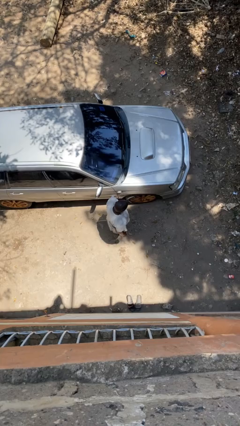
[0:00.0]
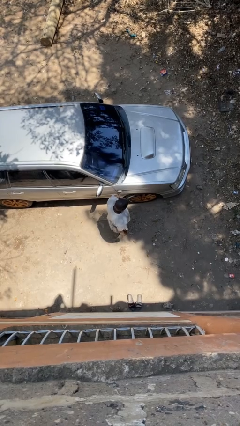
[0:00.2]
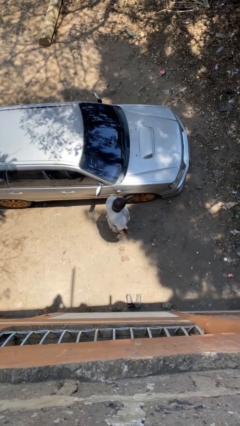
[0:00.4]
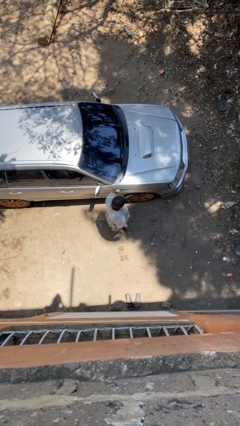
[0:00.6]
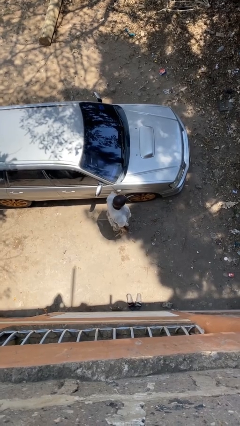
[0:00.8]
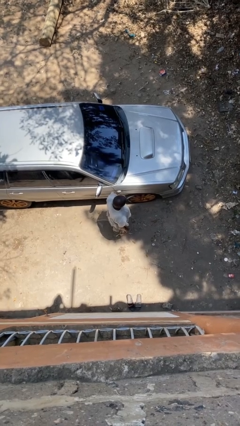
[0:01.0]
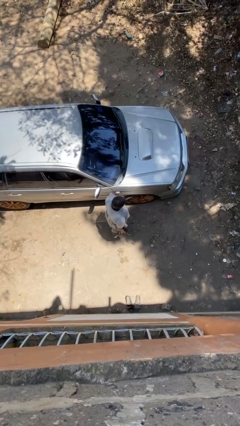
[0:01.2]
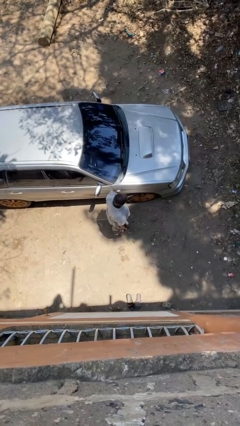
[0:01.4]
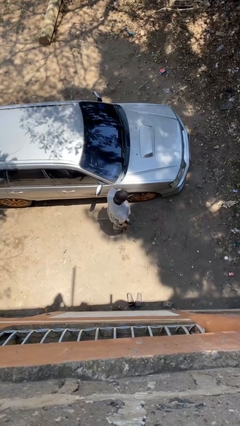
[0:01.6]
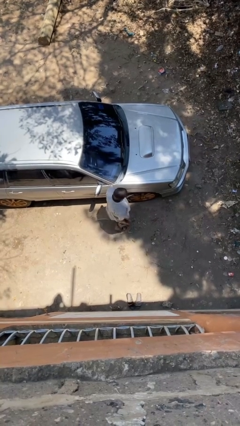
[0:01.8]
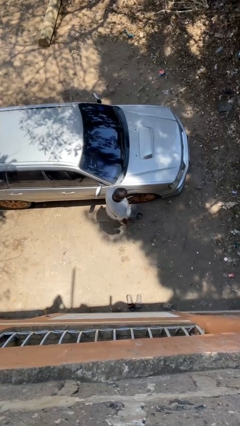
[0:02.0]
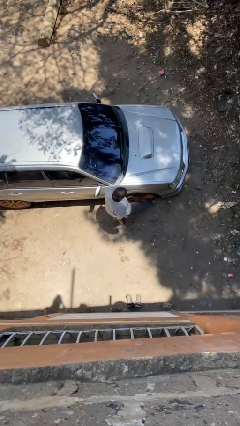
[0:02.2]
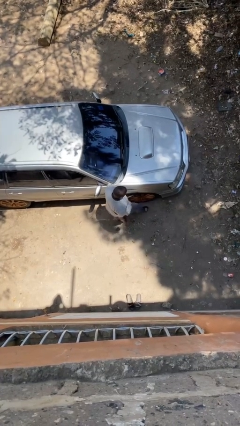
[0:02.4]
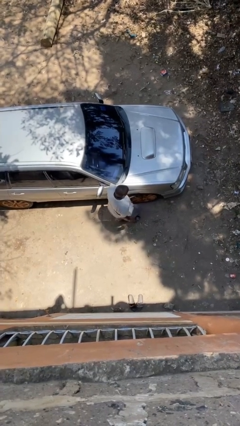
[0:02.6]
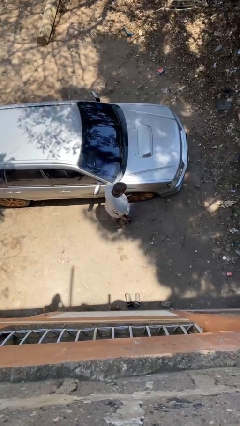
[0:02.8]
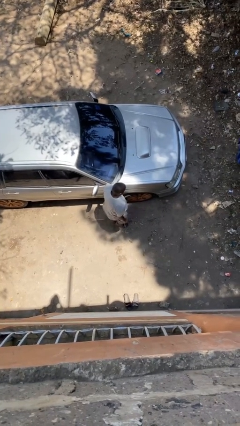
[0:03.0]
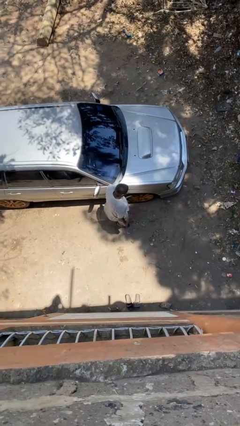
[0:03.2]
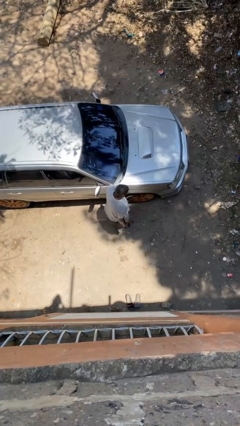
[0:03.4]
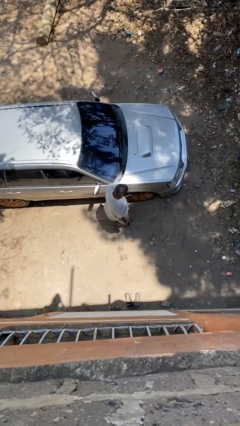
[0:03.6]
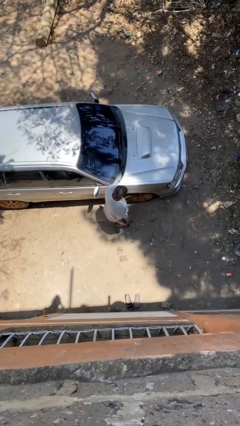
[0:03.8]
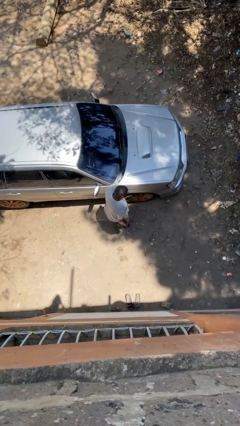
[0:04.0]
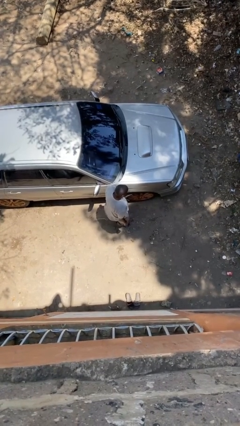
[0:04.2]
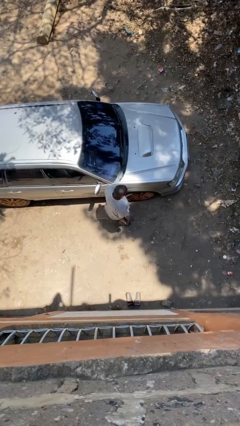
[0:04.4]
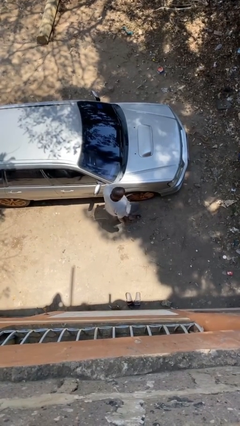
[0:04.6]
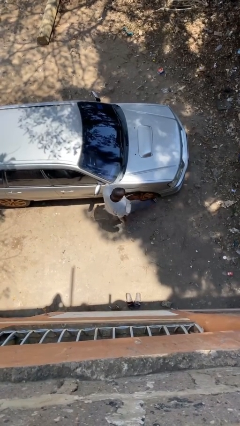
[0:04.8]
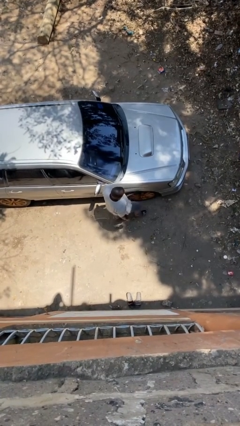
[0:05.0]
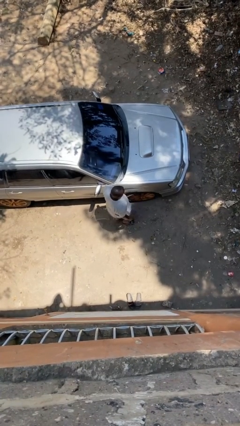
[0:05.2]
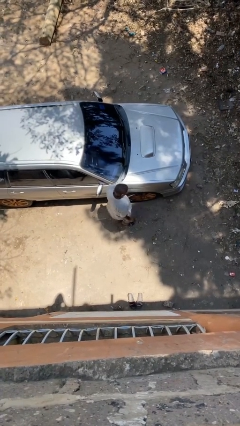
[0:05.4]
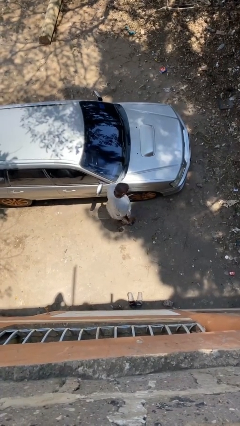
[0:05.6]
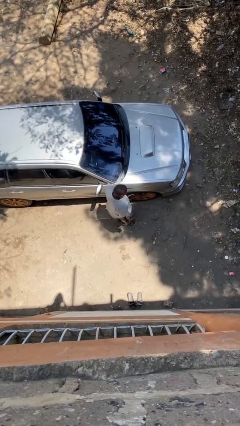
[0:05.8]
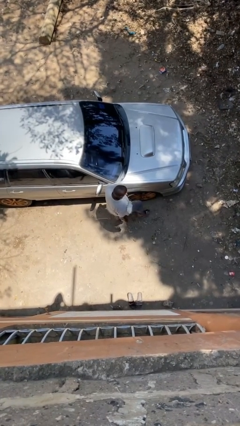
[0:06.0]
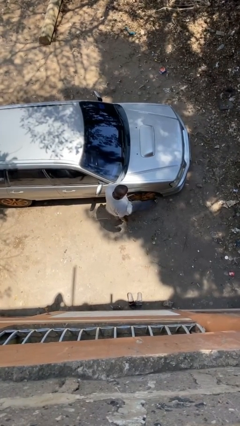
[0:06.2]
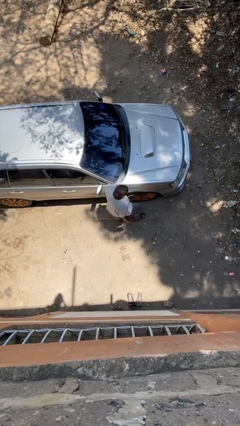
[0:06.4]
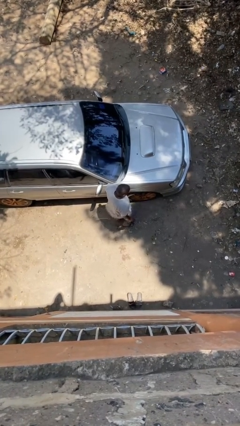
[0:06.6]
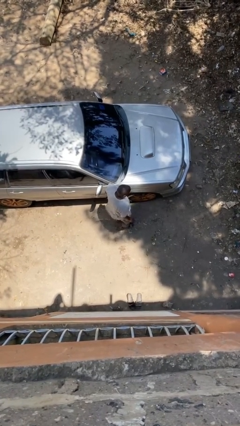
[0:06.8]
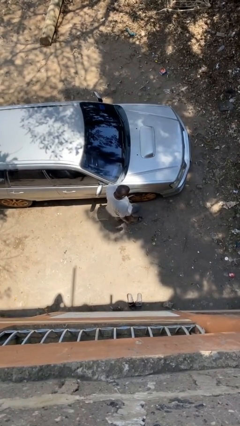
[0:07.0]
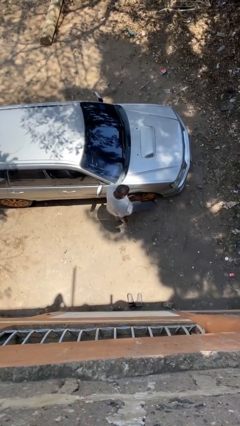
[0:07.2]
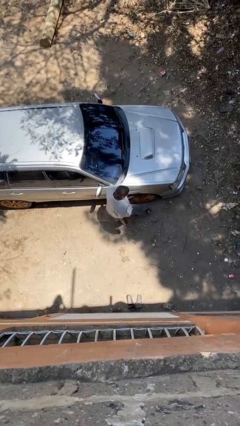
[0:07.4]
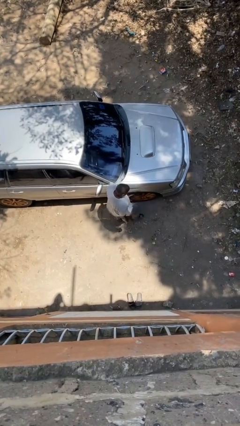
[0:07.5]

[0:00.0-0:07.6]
person kicks car tires

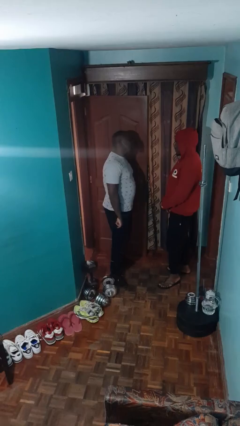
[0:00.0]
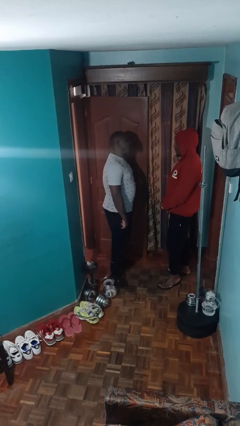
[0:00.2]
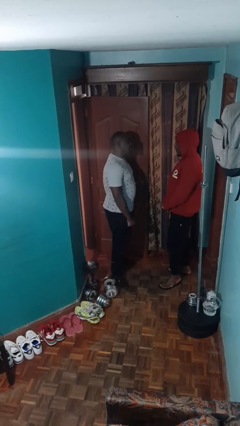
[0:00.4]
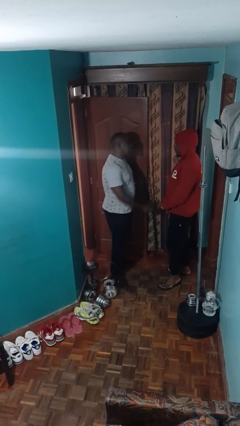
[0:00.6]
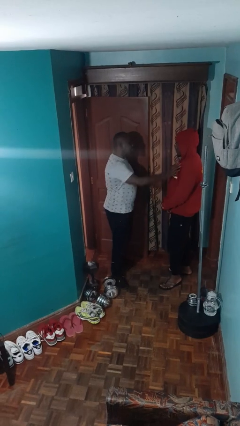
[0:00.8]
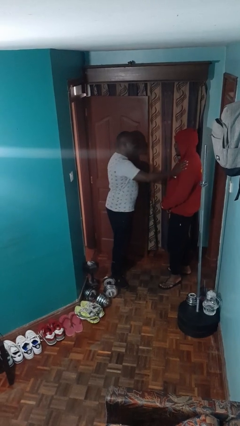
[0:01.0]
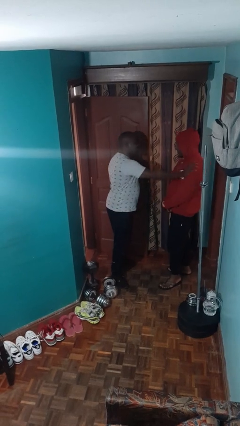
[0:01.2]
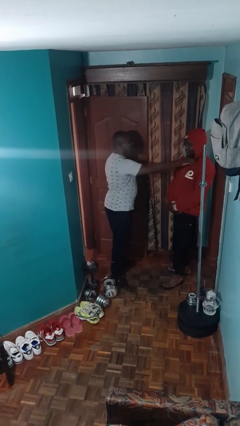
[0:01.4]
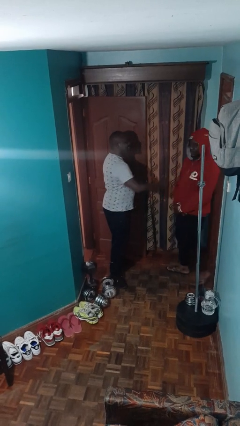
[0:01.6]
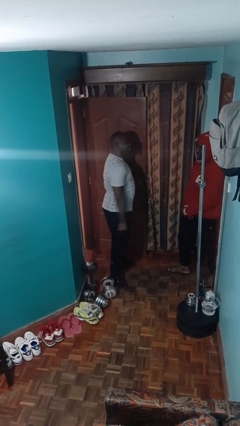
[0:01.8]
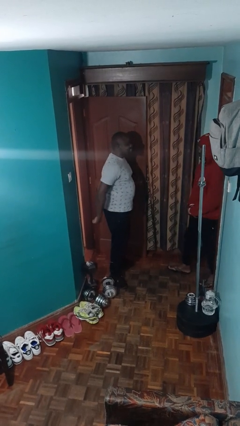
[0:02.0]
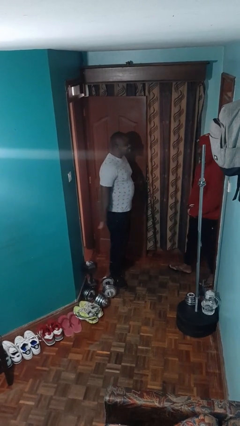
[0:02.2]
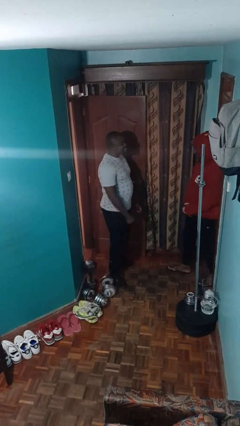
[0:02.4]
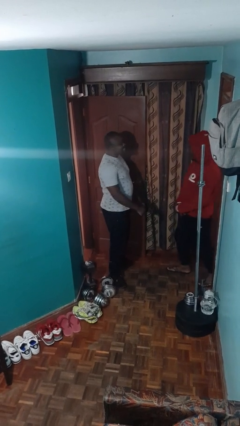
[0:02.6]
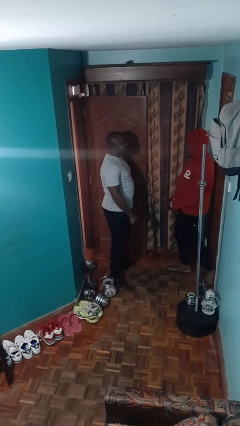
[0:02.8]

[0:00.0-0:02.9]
person shoves person

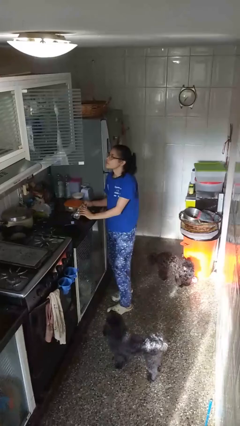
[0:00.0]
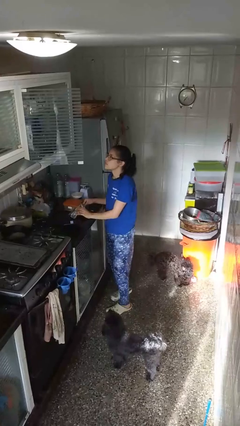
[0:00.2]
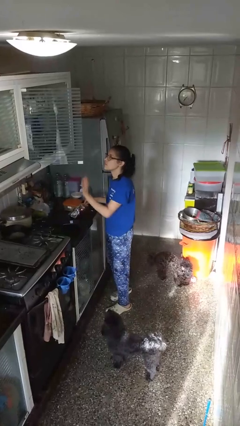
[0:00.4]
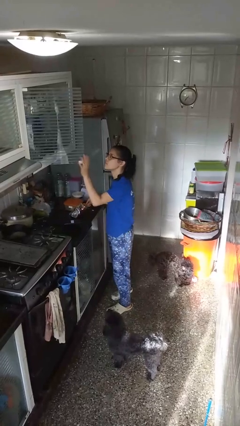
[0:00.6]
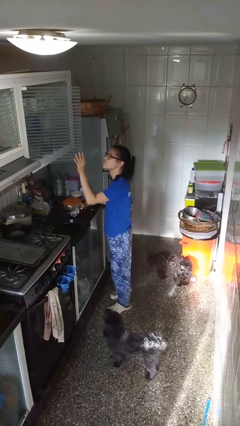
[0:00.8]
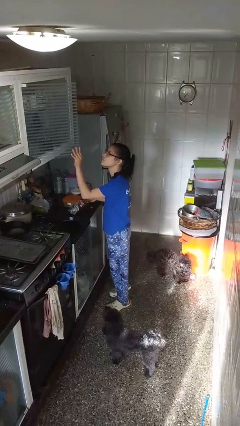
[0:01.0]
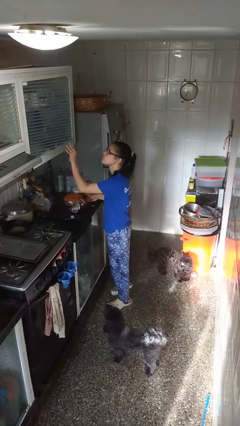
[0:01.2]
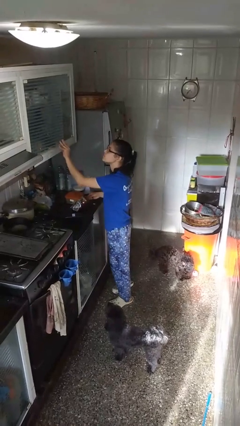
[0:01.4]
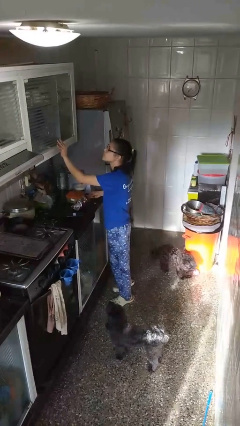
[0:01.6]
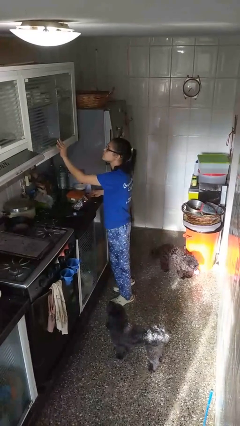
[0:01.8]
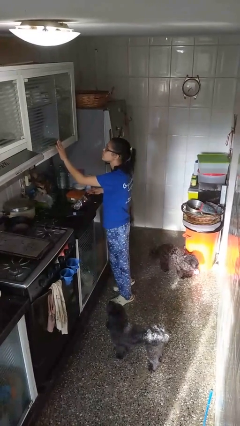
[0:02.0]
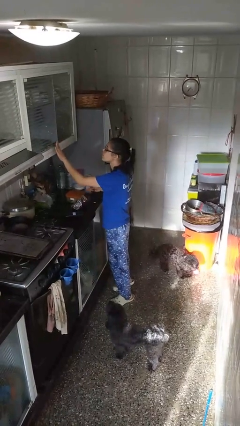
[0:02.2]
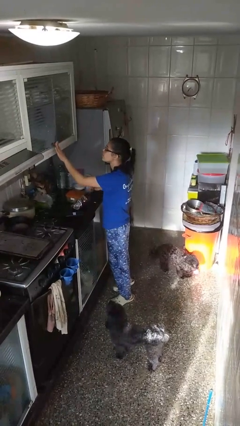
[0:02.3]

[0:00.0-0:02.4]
person closes cabinet

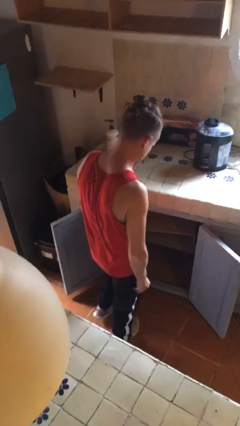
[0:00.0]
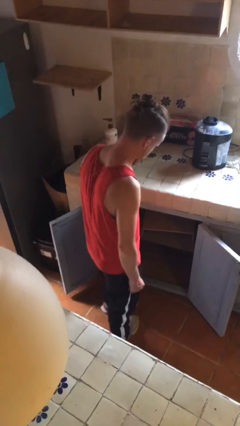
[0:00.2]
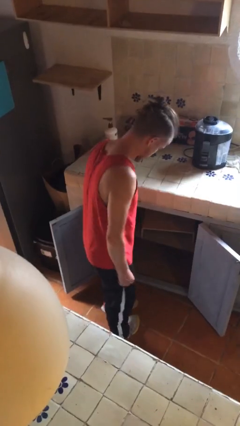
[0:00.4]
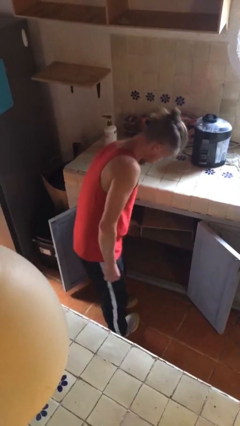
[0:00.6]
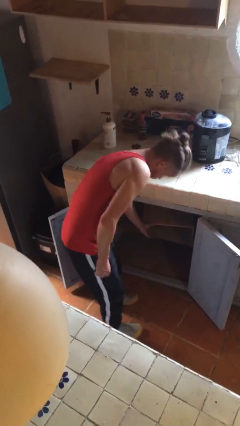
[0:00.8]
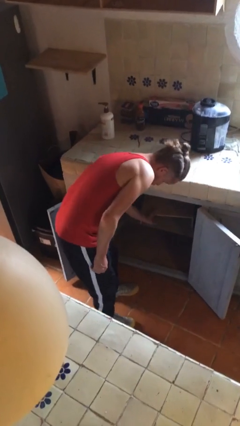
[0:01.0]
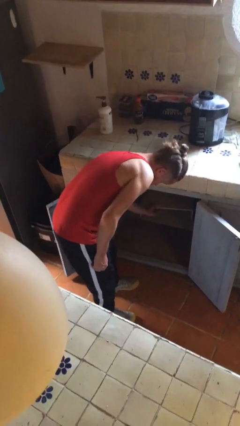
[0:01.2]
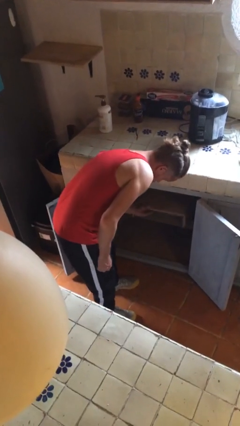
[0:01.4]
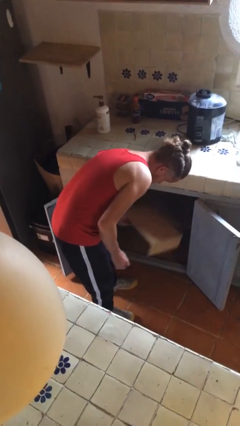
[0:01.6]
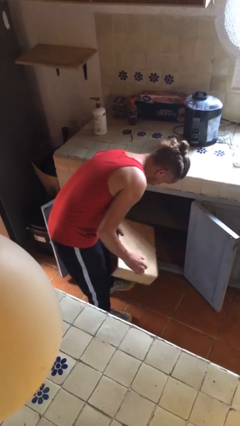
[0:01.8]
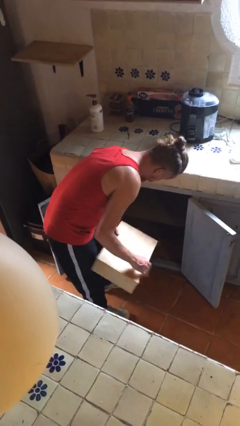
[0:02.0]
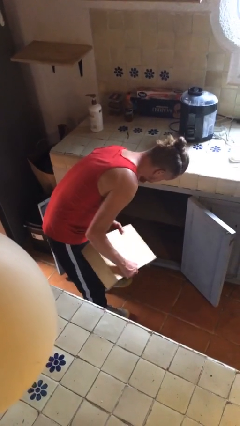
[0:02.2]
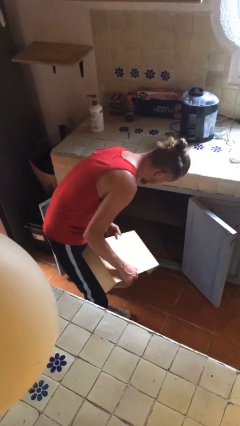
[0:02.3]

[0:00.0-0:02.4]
person picks up object from cabinet

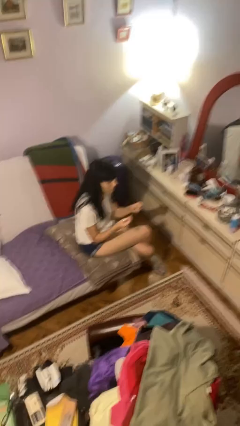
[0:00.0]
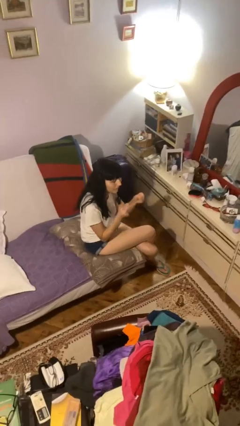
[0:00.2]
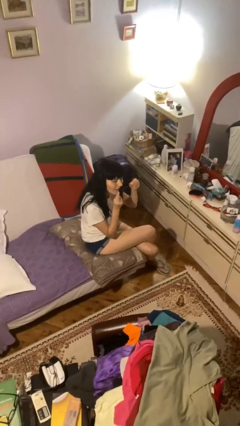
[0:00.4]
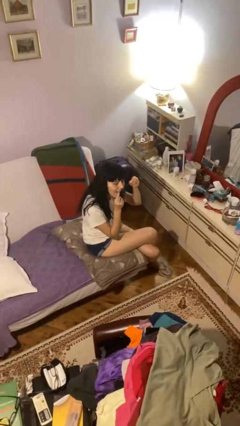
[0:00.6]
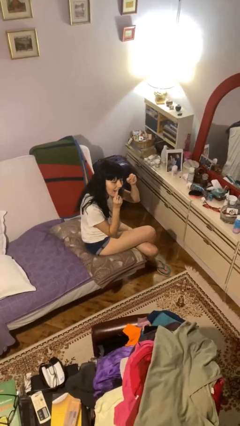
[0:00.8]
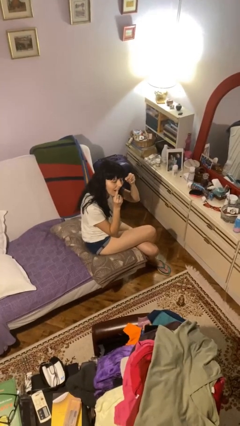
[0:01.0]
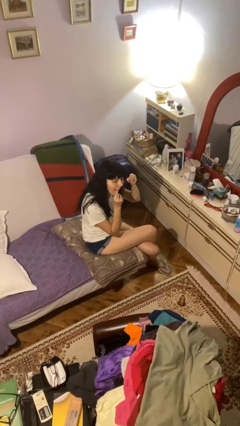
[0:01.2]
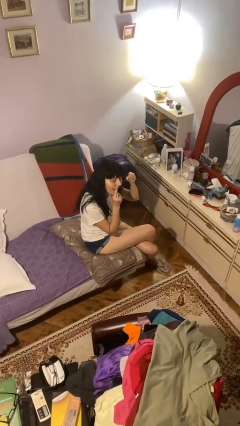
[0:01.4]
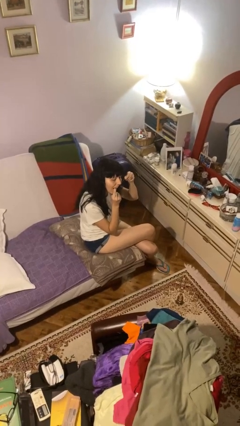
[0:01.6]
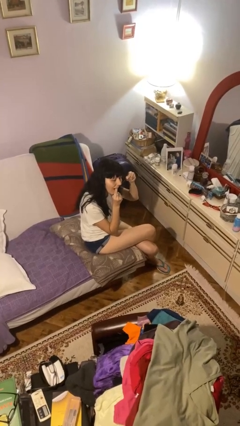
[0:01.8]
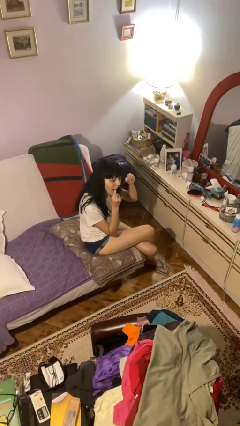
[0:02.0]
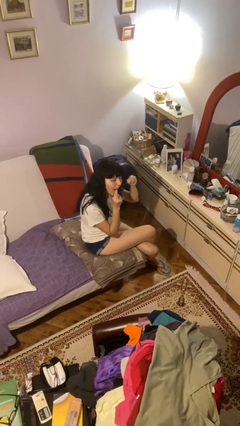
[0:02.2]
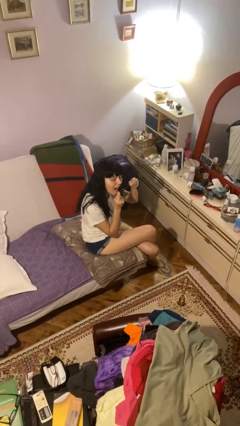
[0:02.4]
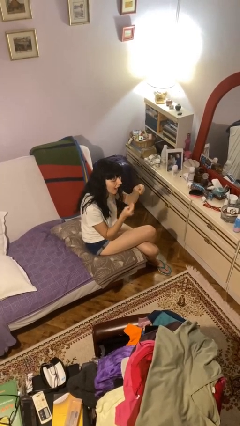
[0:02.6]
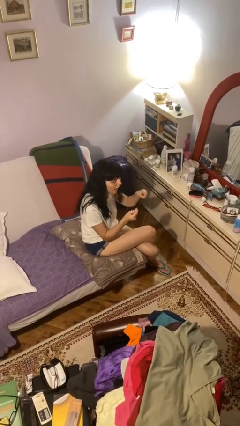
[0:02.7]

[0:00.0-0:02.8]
person flosses
